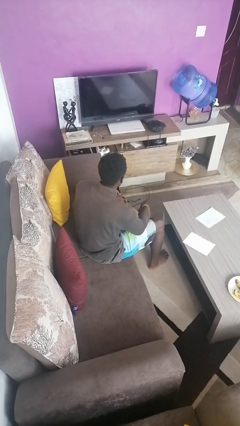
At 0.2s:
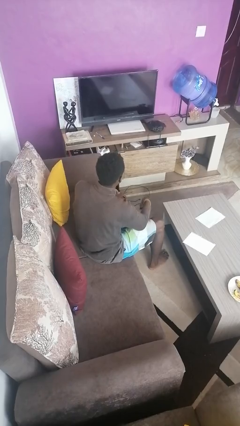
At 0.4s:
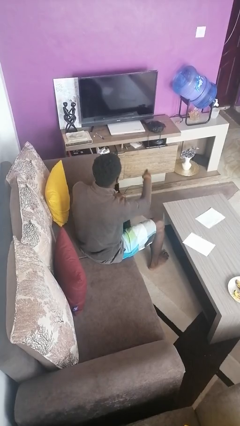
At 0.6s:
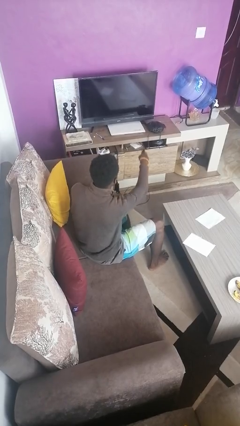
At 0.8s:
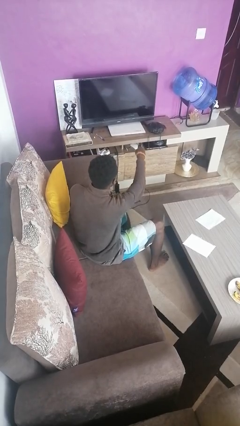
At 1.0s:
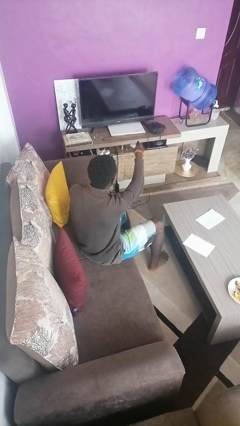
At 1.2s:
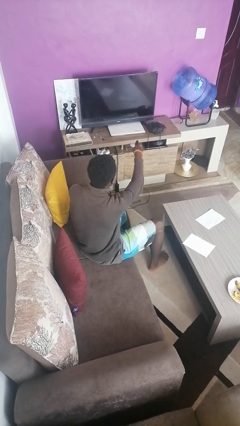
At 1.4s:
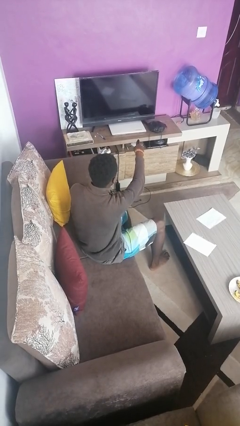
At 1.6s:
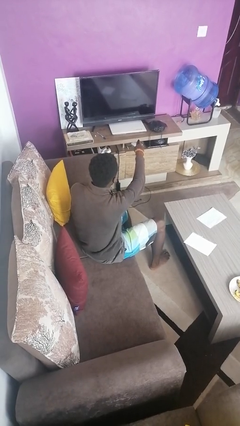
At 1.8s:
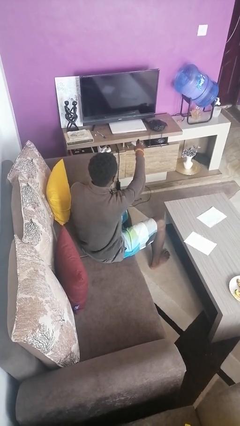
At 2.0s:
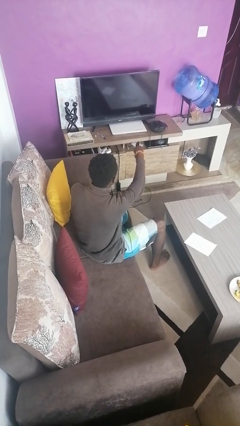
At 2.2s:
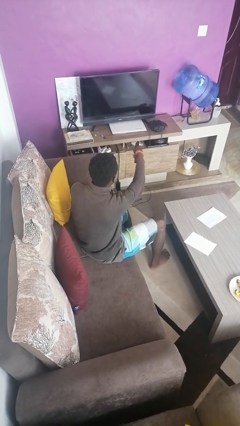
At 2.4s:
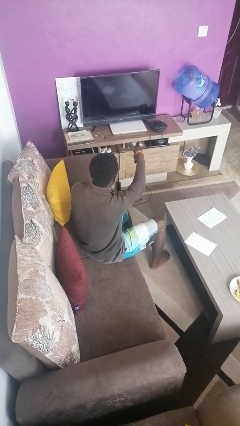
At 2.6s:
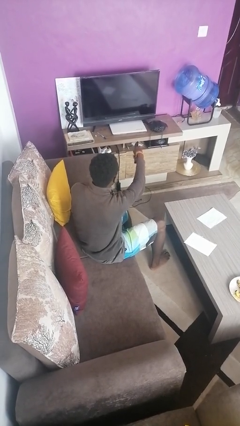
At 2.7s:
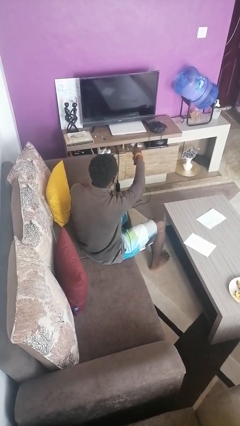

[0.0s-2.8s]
person uses television remote

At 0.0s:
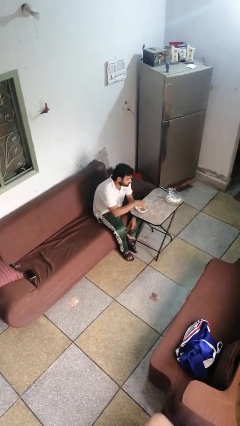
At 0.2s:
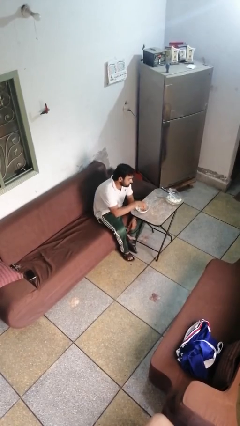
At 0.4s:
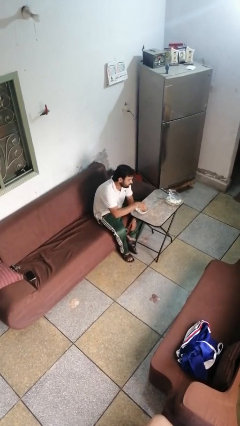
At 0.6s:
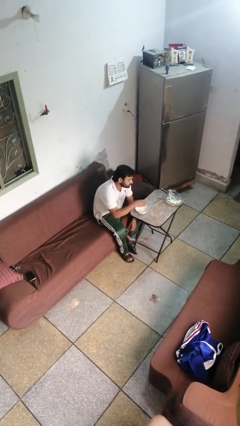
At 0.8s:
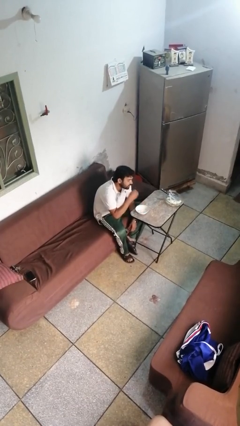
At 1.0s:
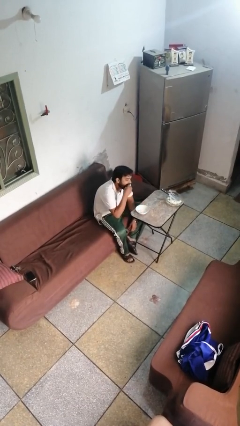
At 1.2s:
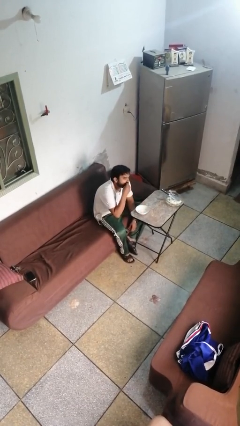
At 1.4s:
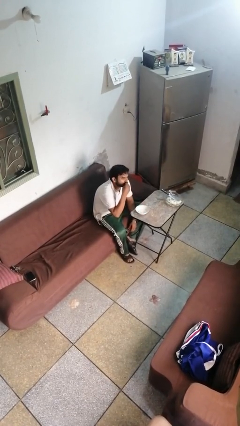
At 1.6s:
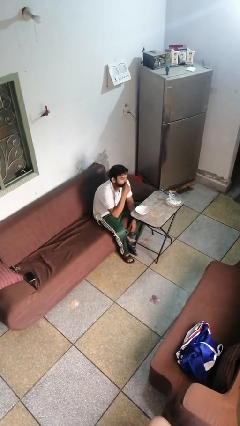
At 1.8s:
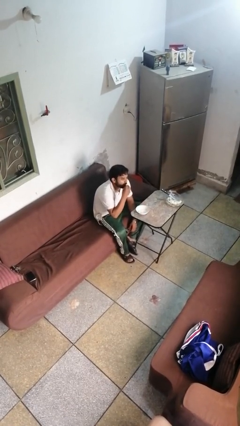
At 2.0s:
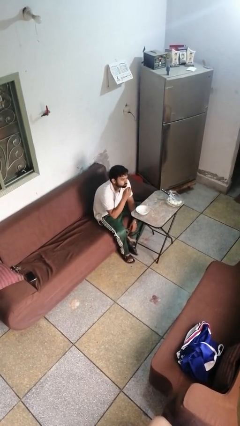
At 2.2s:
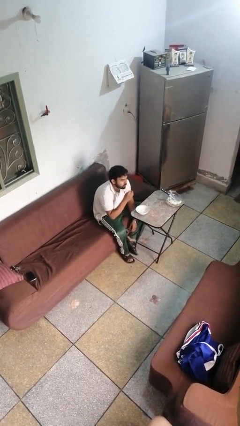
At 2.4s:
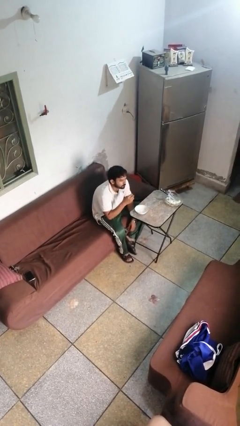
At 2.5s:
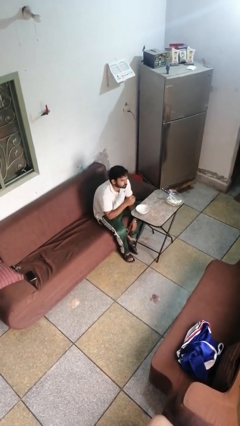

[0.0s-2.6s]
person eats with hands

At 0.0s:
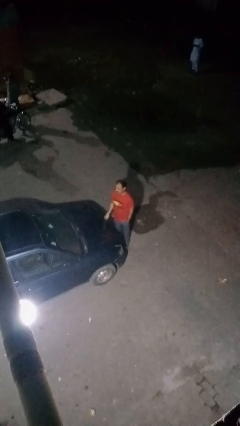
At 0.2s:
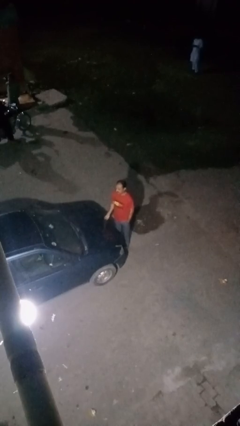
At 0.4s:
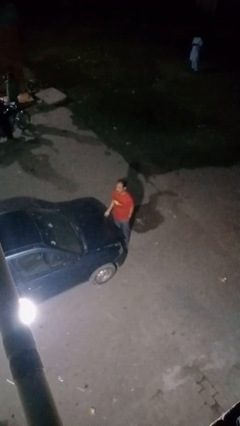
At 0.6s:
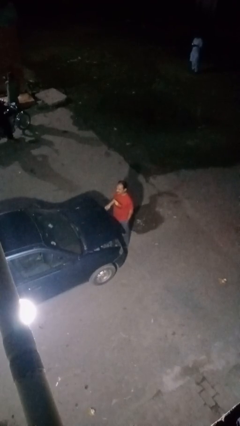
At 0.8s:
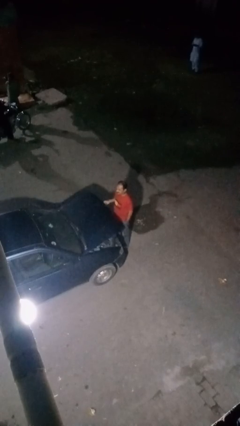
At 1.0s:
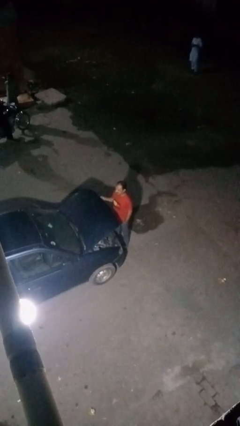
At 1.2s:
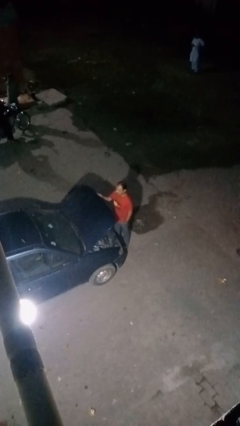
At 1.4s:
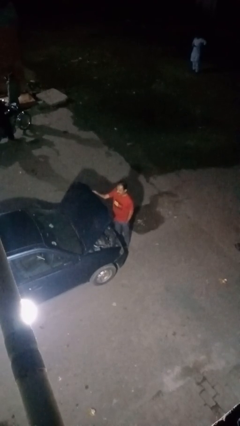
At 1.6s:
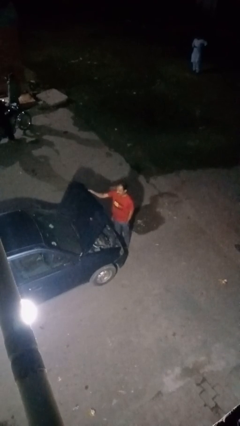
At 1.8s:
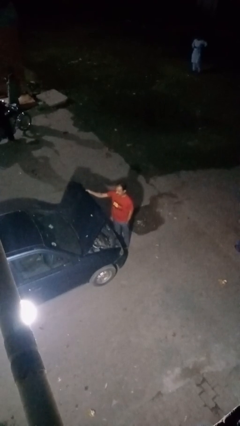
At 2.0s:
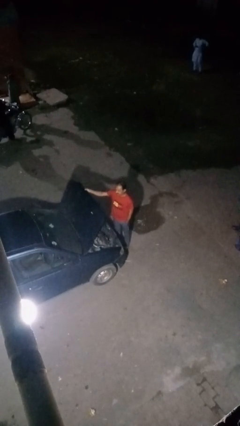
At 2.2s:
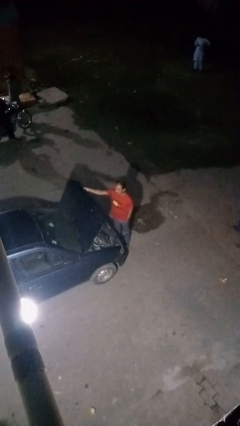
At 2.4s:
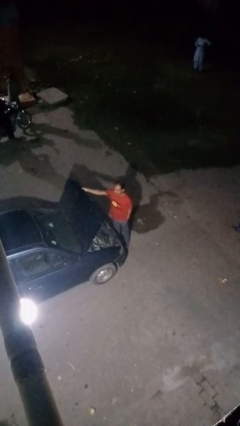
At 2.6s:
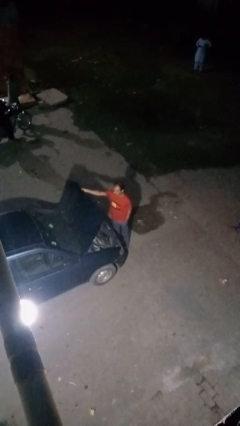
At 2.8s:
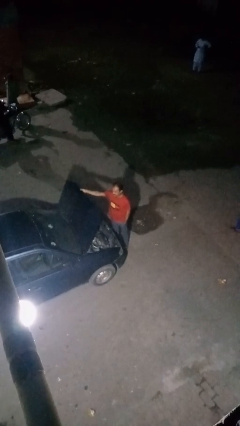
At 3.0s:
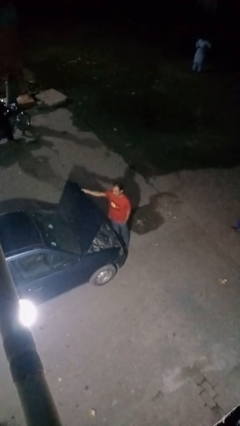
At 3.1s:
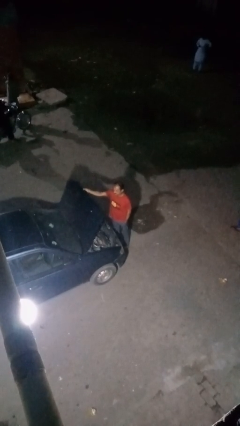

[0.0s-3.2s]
person opens car hood

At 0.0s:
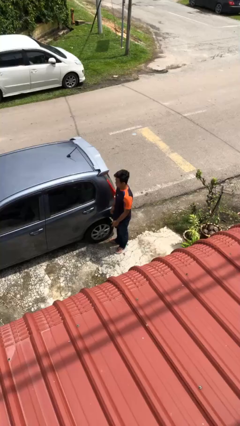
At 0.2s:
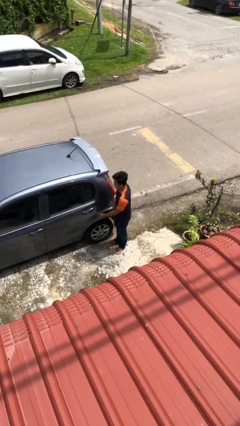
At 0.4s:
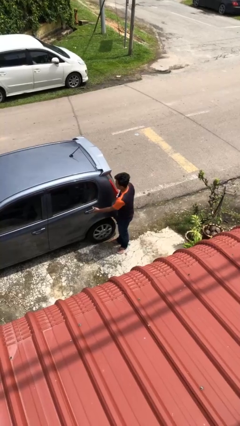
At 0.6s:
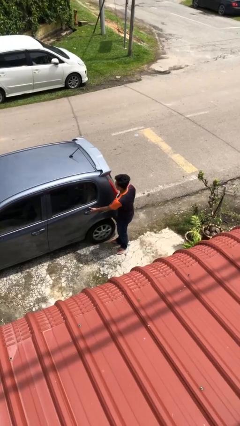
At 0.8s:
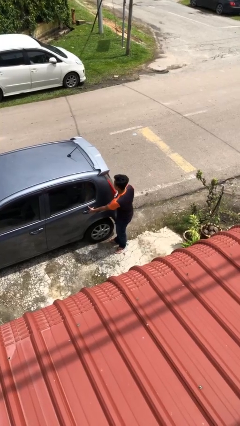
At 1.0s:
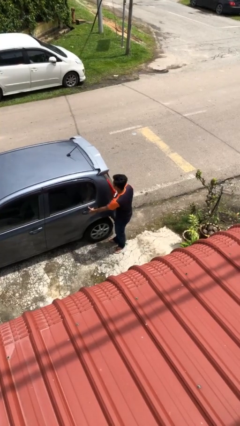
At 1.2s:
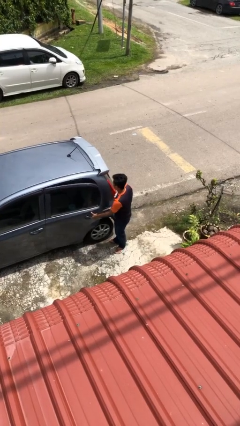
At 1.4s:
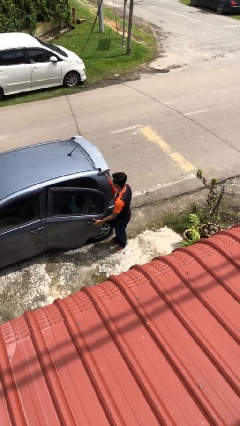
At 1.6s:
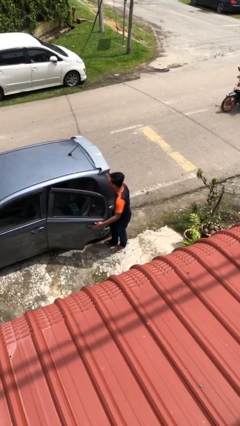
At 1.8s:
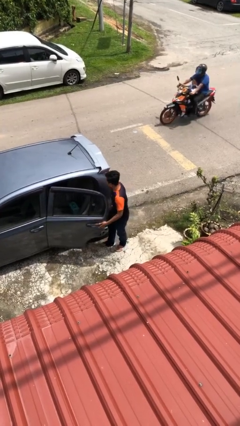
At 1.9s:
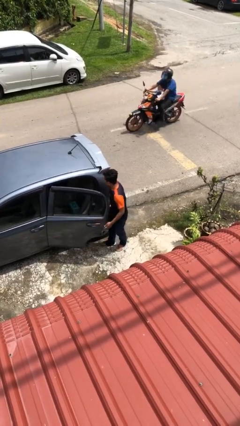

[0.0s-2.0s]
person opens car door

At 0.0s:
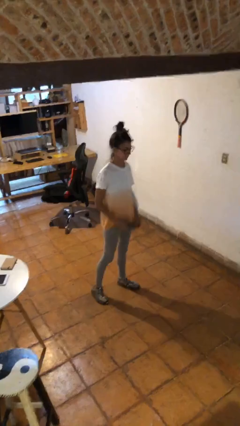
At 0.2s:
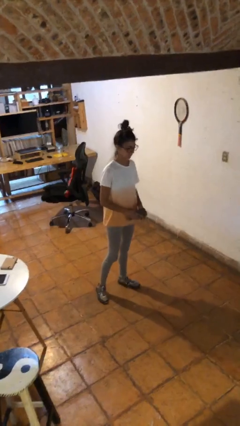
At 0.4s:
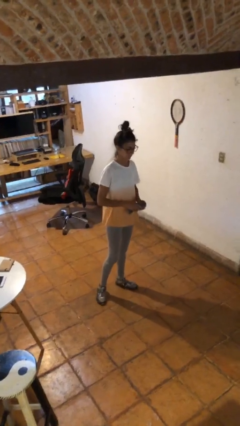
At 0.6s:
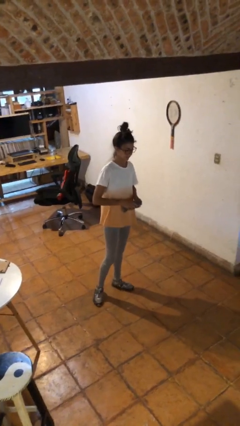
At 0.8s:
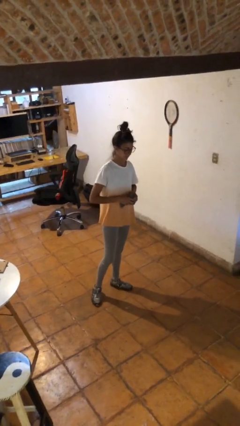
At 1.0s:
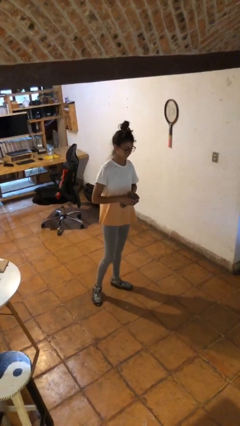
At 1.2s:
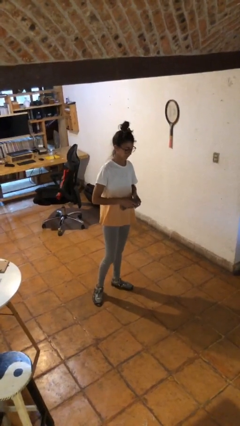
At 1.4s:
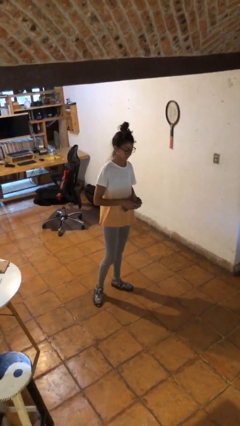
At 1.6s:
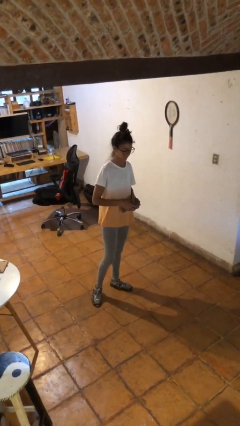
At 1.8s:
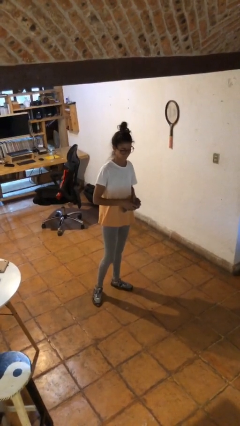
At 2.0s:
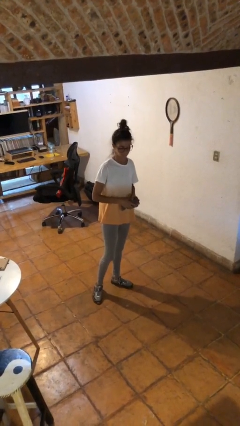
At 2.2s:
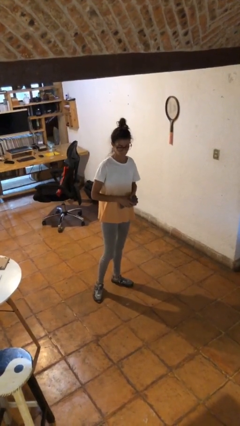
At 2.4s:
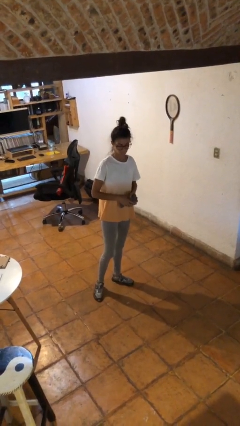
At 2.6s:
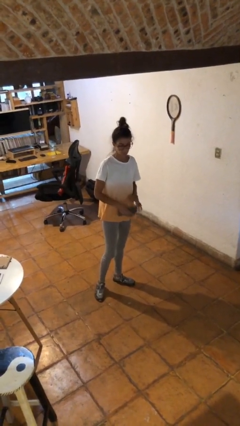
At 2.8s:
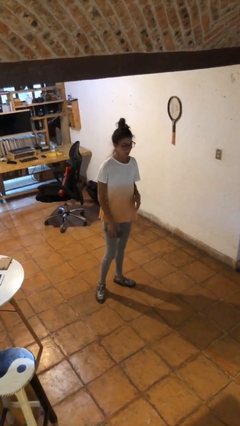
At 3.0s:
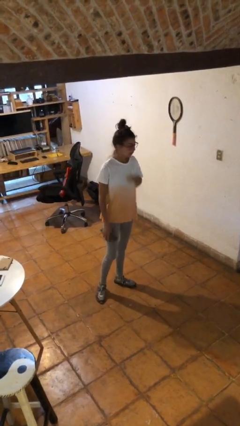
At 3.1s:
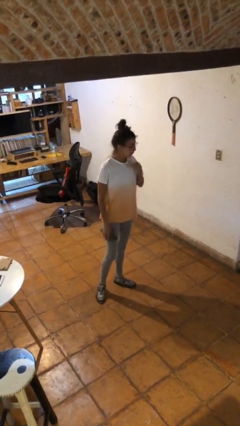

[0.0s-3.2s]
person squeezes object

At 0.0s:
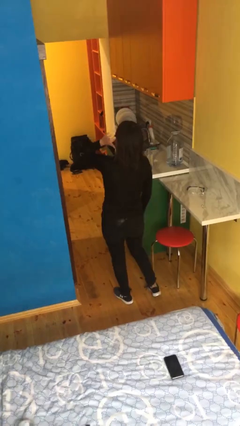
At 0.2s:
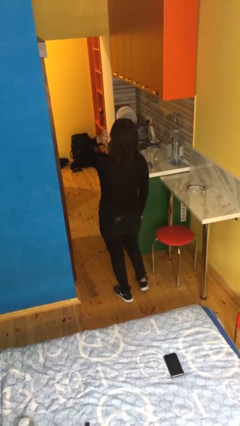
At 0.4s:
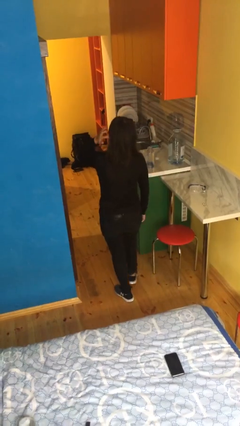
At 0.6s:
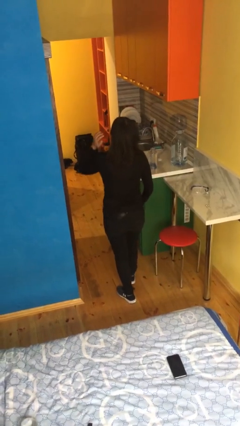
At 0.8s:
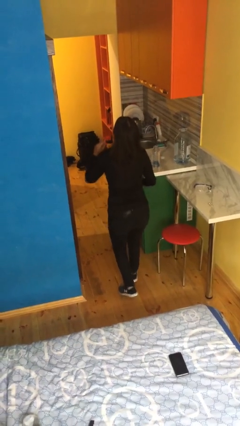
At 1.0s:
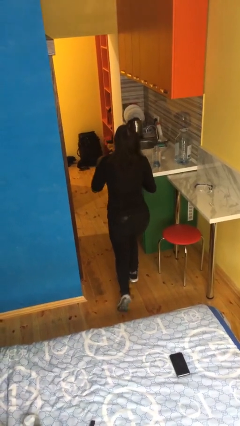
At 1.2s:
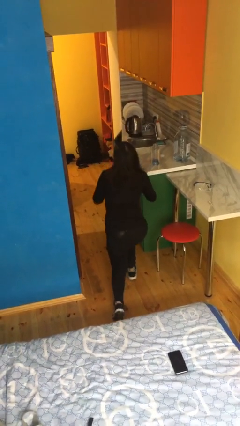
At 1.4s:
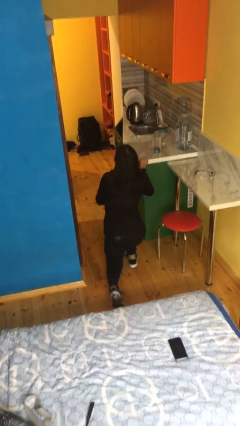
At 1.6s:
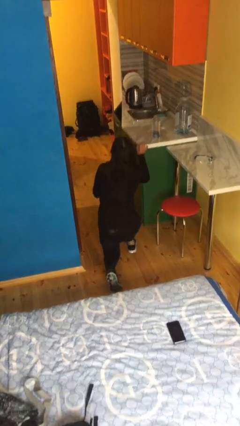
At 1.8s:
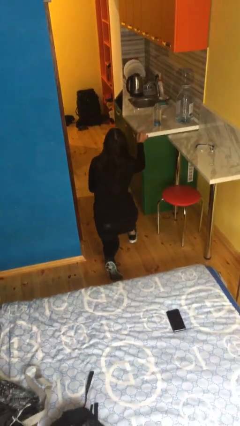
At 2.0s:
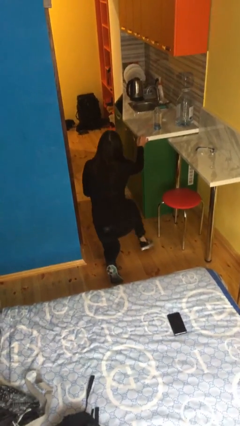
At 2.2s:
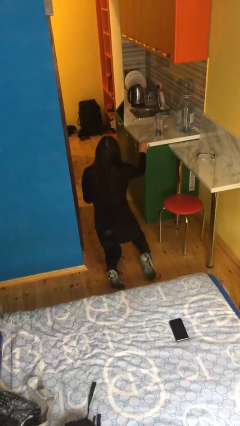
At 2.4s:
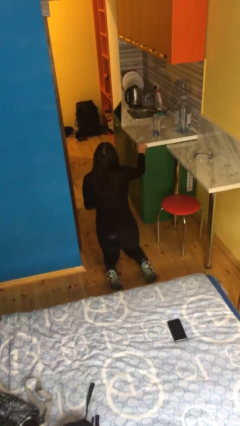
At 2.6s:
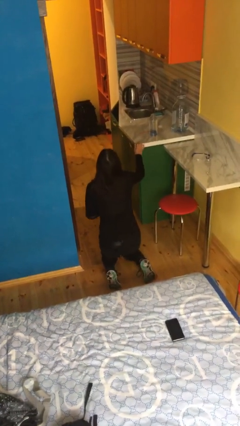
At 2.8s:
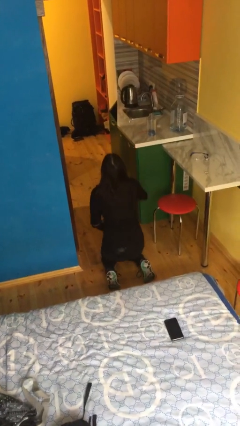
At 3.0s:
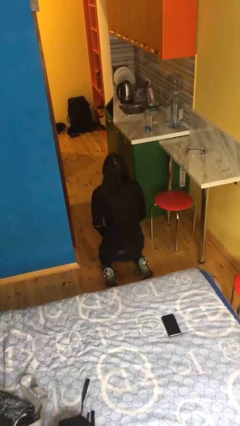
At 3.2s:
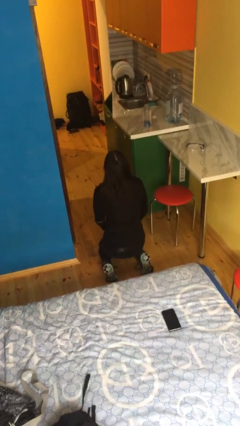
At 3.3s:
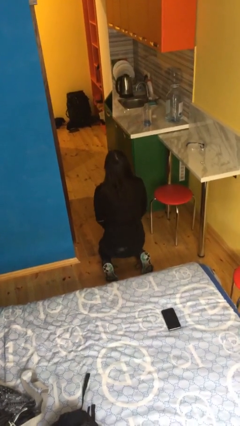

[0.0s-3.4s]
person kneels
